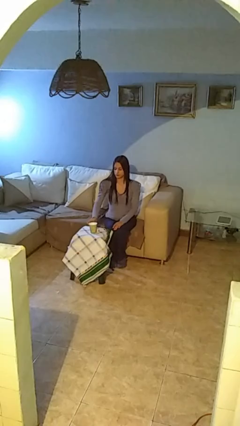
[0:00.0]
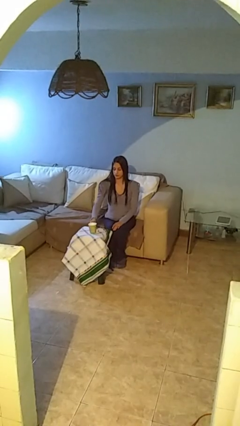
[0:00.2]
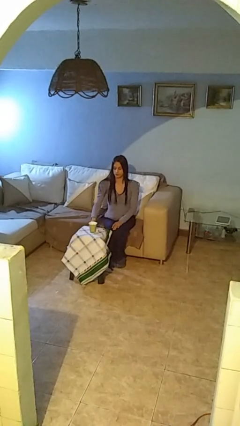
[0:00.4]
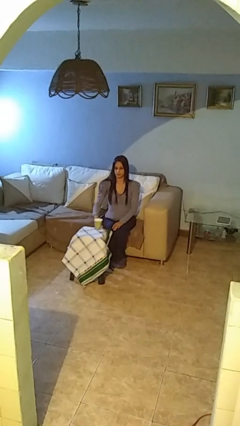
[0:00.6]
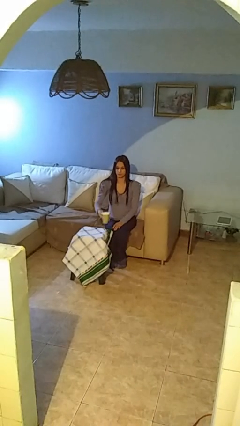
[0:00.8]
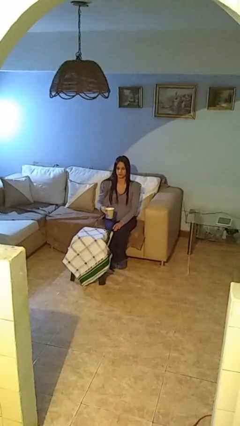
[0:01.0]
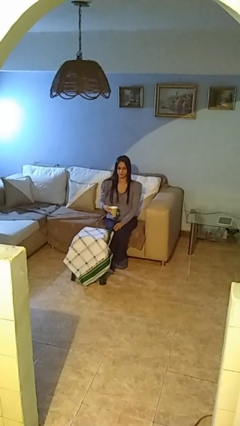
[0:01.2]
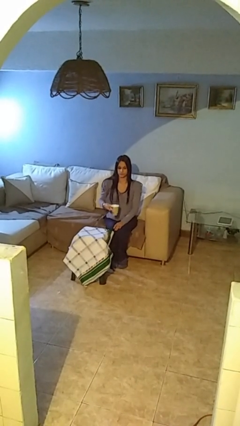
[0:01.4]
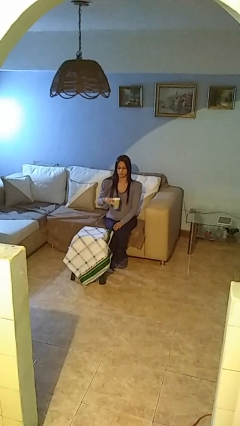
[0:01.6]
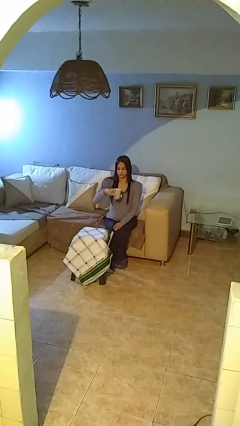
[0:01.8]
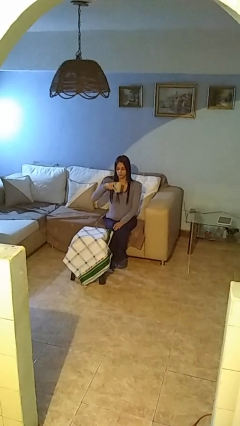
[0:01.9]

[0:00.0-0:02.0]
person picks up object from table

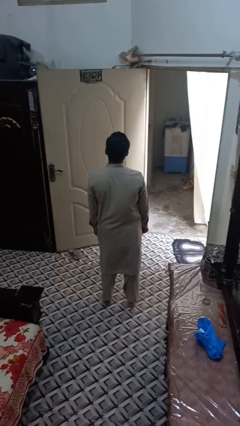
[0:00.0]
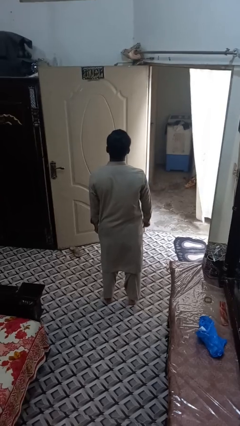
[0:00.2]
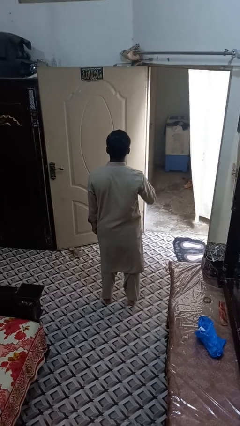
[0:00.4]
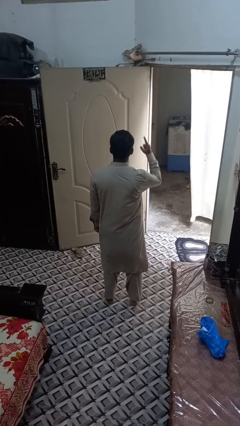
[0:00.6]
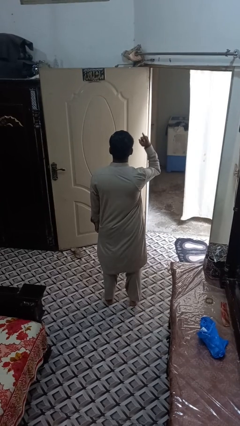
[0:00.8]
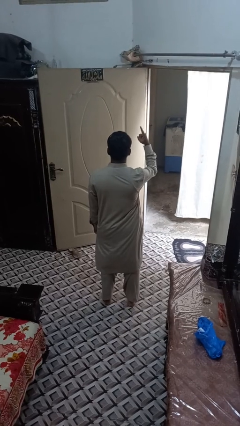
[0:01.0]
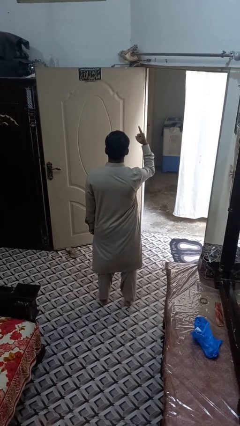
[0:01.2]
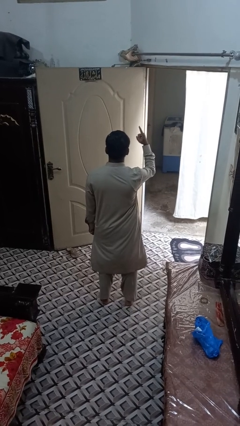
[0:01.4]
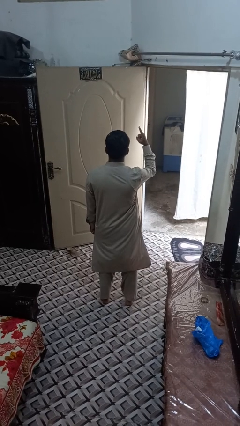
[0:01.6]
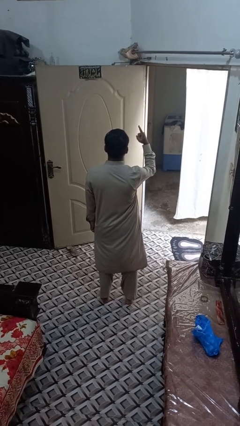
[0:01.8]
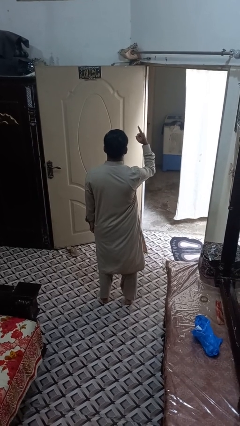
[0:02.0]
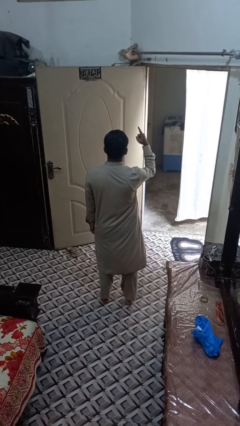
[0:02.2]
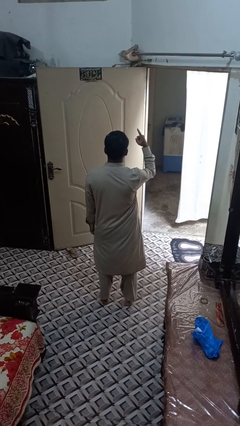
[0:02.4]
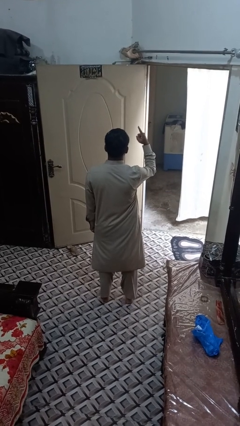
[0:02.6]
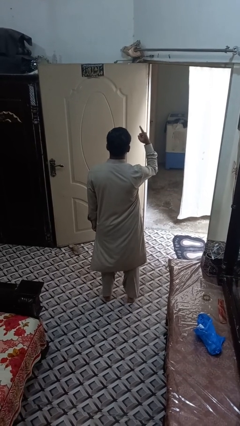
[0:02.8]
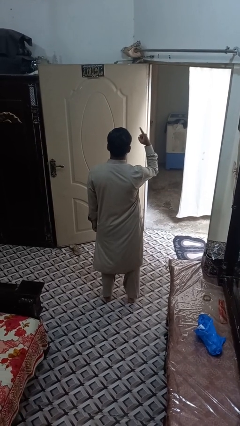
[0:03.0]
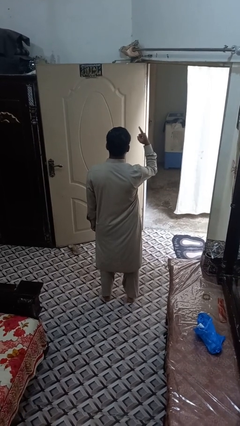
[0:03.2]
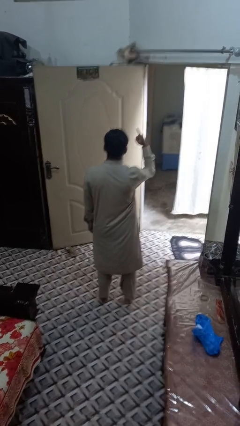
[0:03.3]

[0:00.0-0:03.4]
person gestures number one

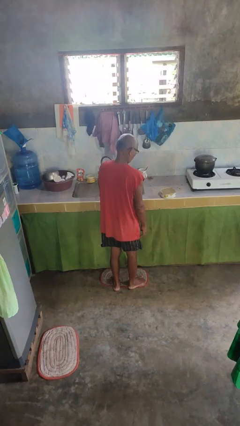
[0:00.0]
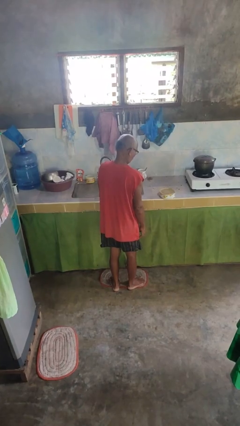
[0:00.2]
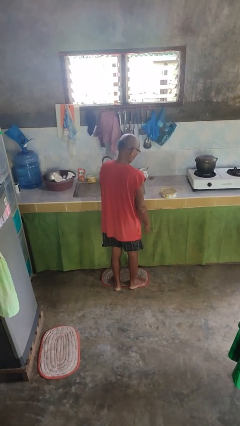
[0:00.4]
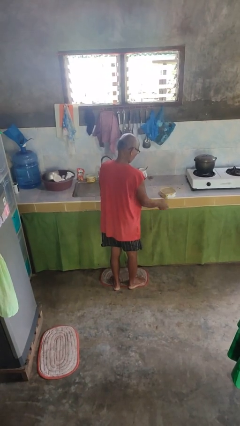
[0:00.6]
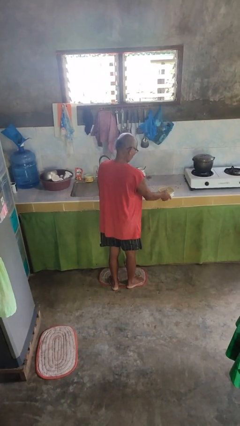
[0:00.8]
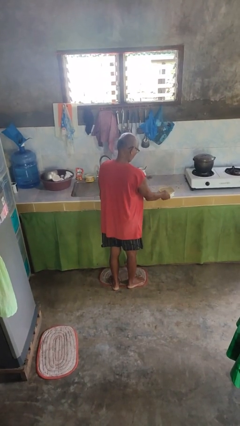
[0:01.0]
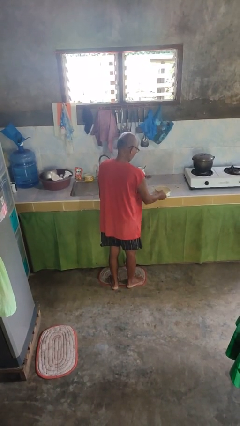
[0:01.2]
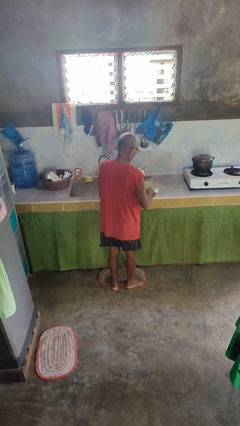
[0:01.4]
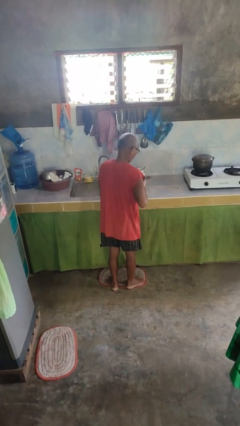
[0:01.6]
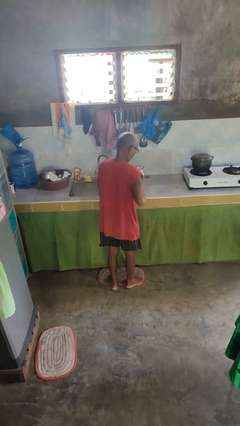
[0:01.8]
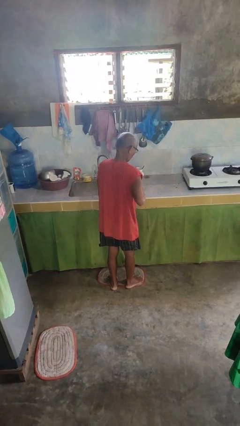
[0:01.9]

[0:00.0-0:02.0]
person picks up object from countertop

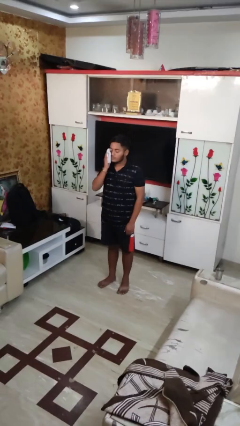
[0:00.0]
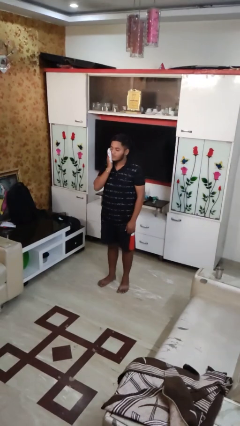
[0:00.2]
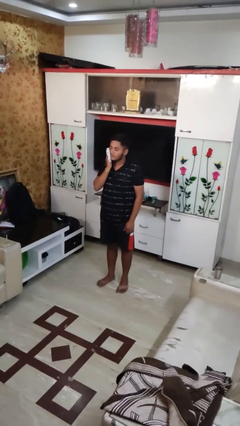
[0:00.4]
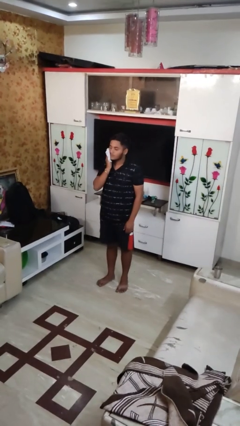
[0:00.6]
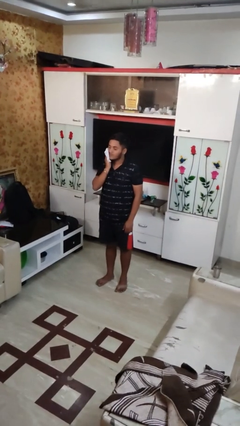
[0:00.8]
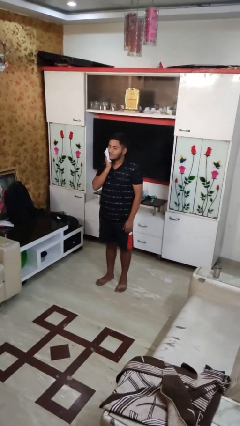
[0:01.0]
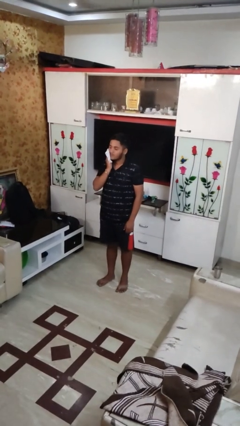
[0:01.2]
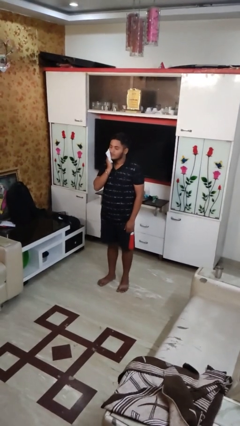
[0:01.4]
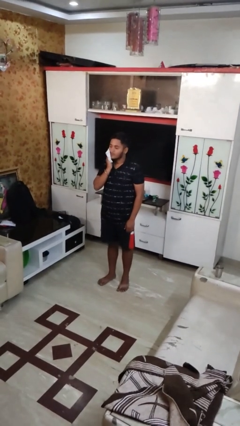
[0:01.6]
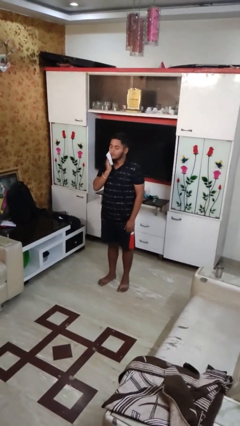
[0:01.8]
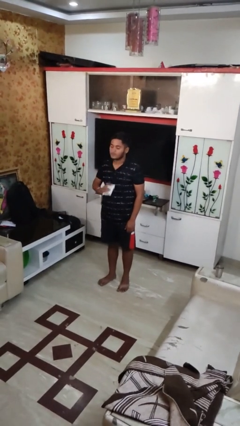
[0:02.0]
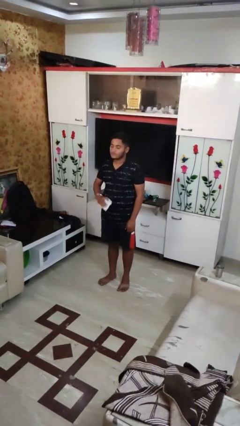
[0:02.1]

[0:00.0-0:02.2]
person wipes mouth with napkin

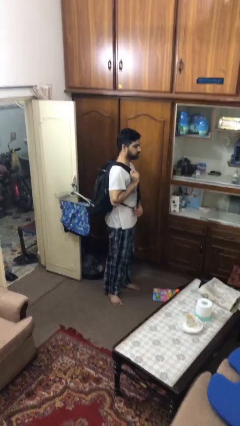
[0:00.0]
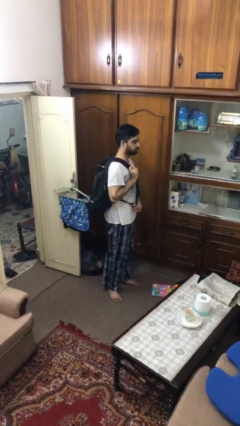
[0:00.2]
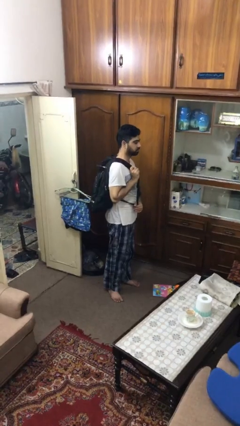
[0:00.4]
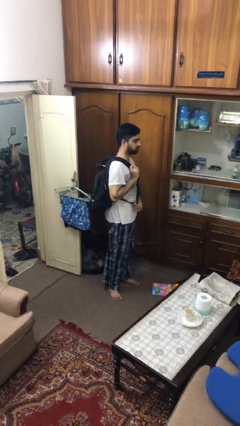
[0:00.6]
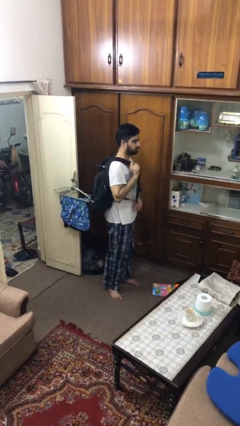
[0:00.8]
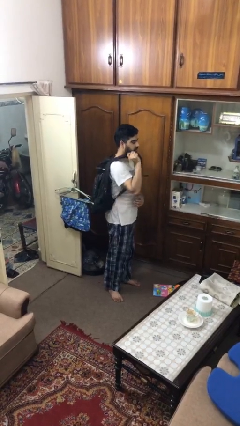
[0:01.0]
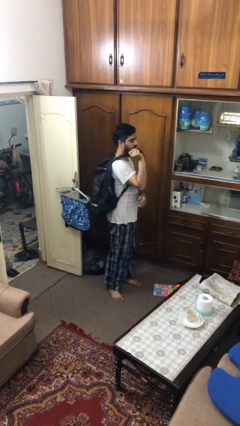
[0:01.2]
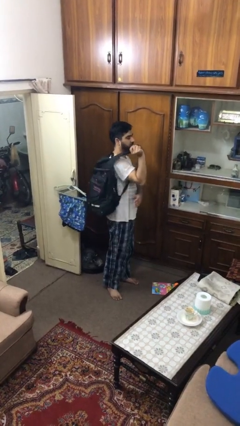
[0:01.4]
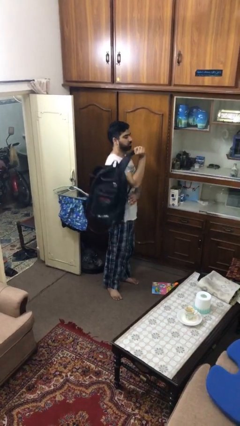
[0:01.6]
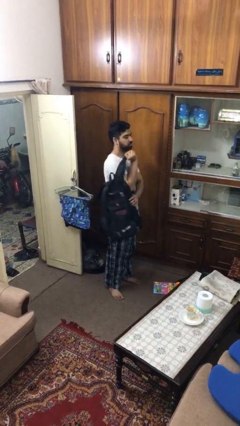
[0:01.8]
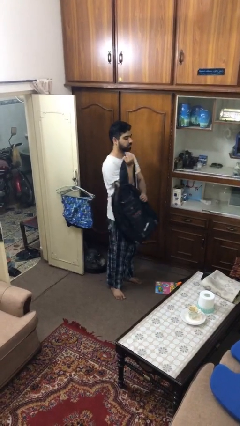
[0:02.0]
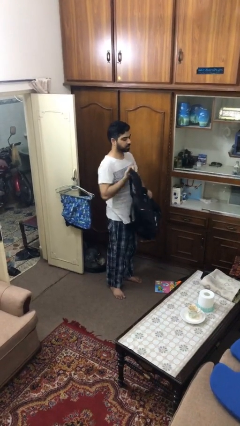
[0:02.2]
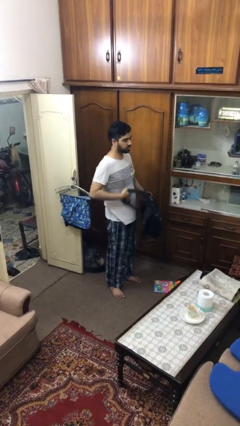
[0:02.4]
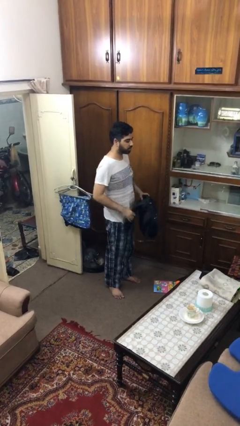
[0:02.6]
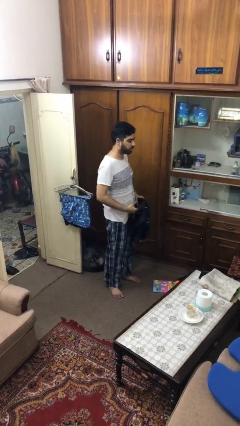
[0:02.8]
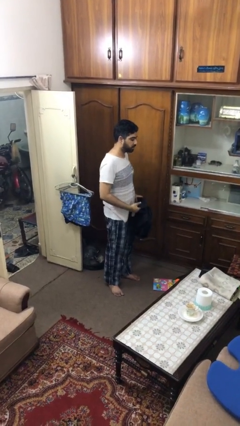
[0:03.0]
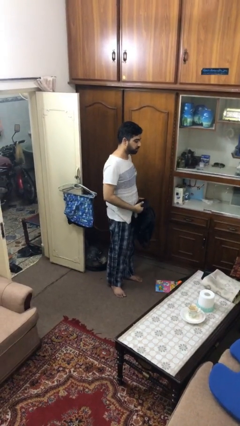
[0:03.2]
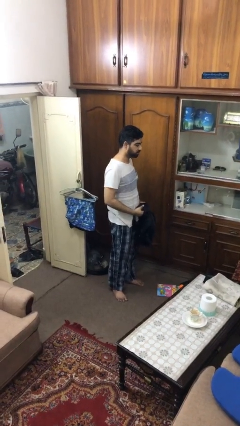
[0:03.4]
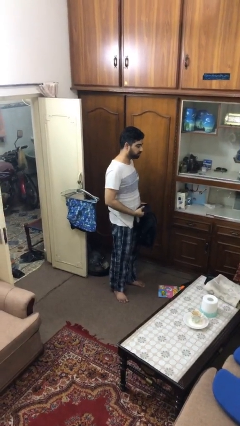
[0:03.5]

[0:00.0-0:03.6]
person takes off backpack

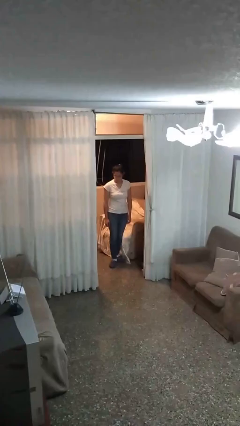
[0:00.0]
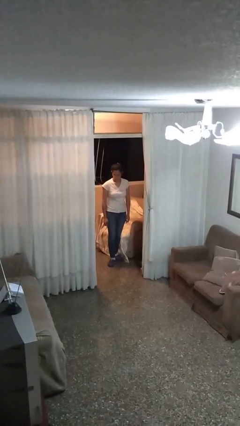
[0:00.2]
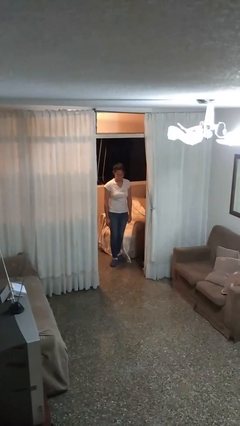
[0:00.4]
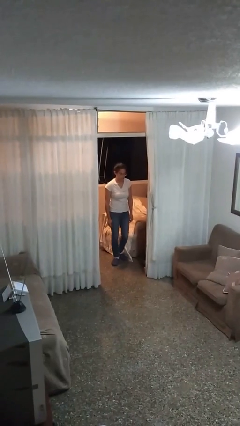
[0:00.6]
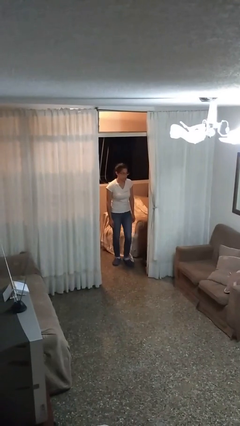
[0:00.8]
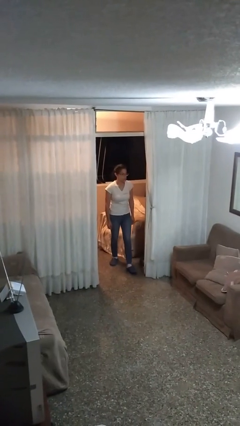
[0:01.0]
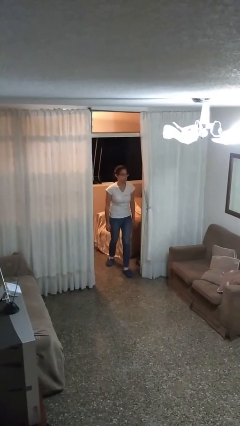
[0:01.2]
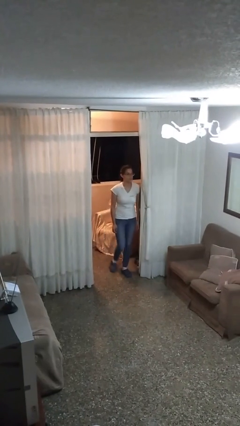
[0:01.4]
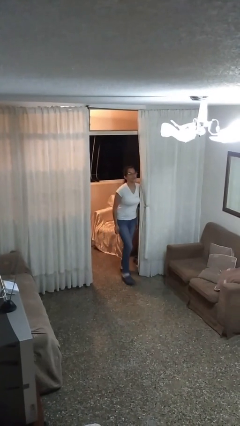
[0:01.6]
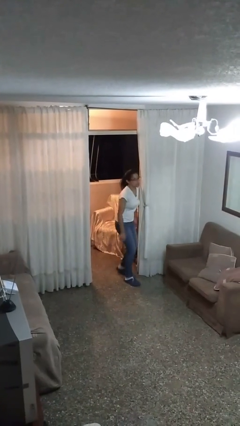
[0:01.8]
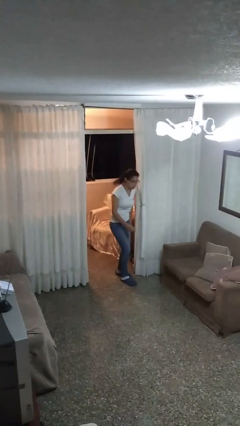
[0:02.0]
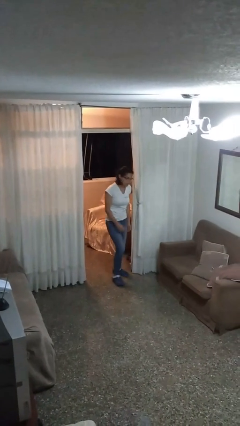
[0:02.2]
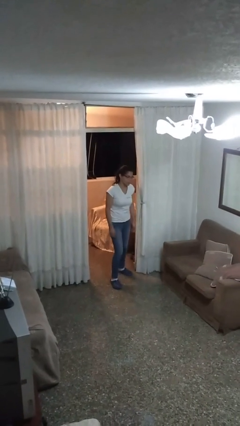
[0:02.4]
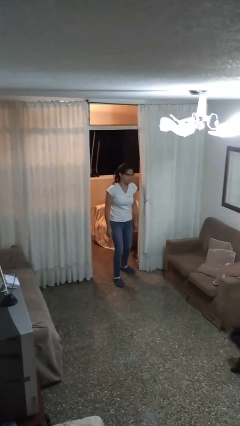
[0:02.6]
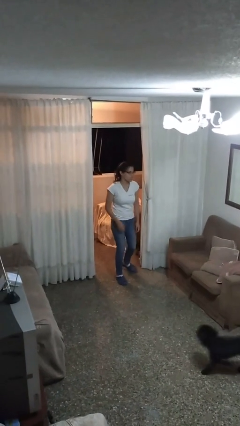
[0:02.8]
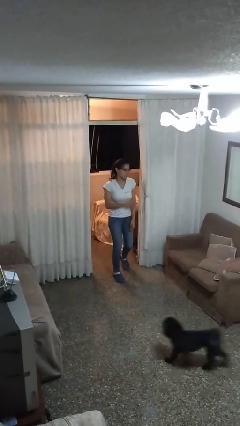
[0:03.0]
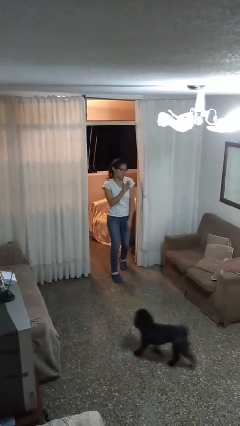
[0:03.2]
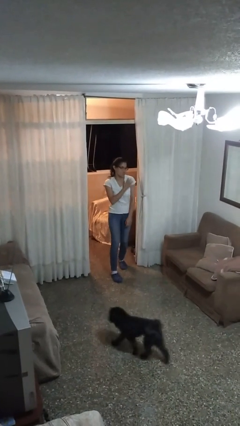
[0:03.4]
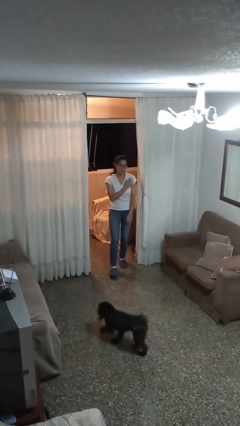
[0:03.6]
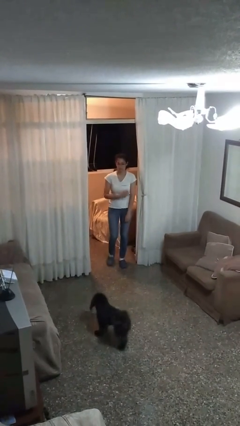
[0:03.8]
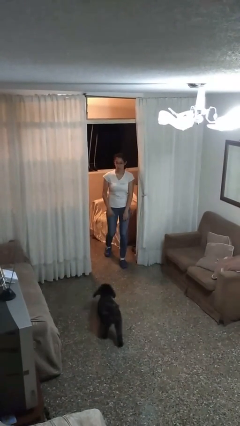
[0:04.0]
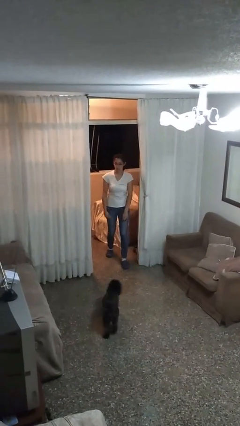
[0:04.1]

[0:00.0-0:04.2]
person bumps into wall
